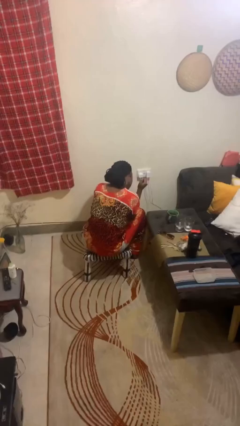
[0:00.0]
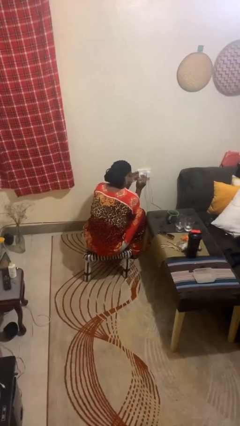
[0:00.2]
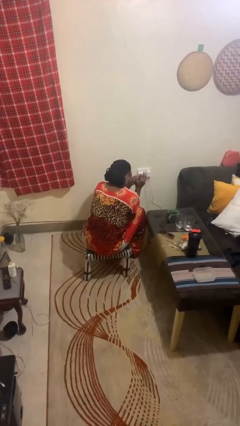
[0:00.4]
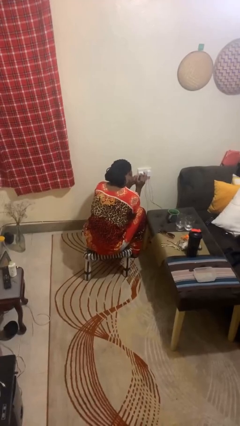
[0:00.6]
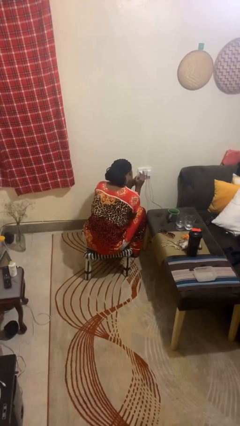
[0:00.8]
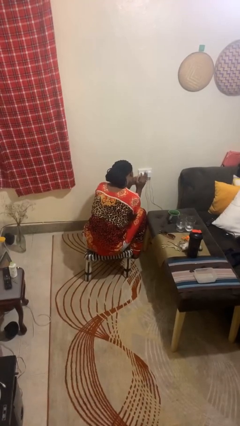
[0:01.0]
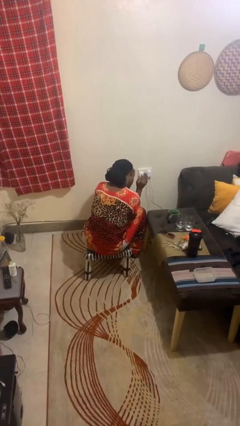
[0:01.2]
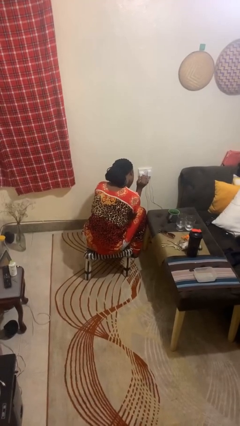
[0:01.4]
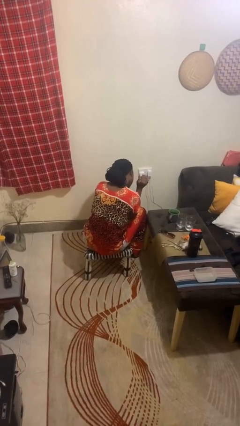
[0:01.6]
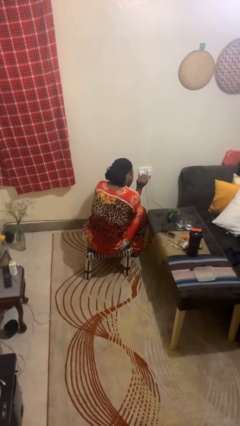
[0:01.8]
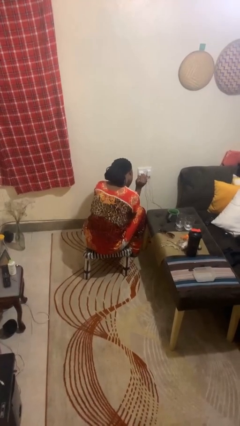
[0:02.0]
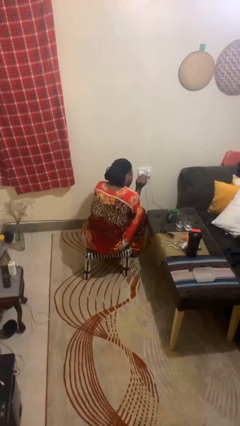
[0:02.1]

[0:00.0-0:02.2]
person puts on ring

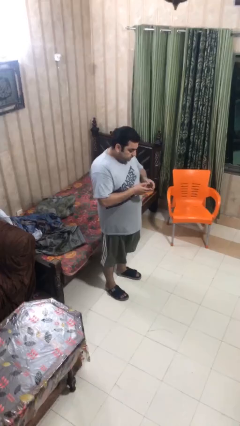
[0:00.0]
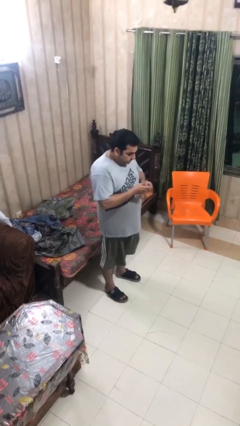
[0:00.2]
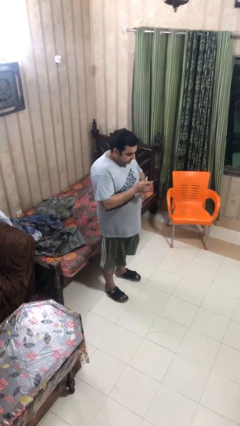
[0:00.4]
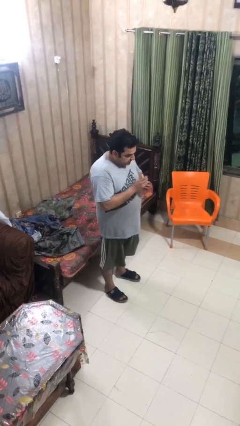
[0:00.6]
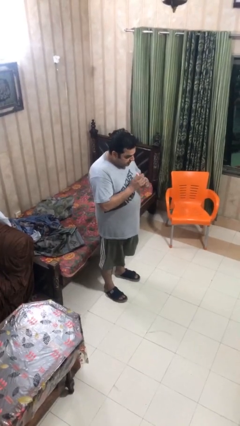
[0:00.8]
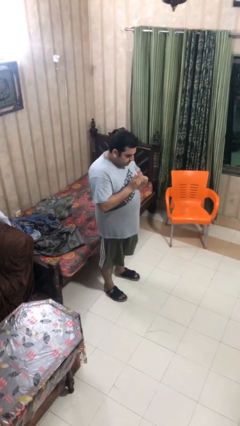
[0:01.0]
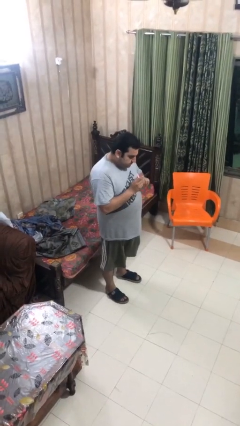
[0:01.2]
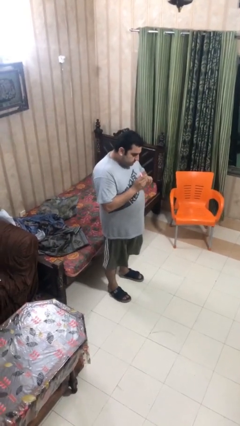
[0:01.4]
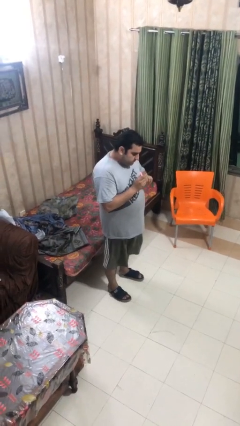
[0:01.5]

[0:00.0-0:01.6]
person clips fingernails

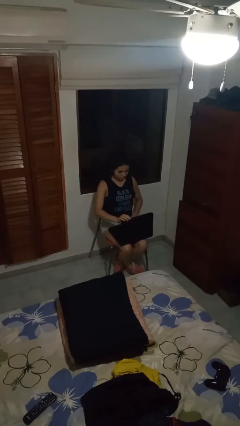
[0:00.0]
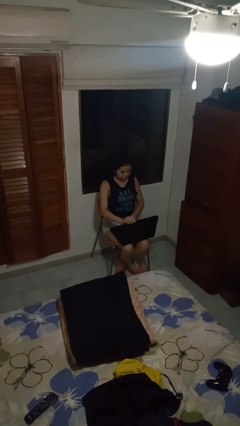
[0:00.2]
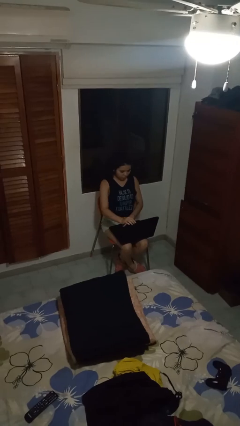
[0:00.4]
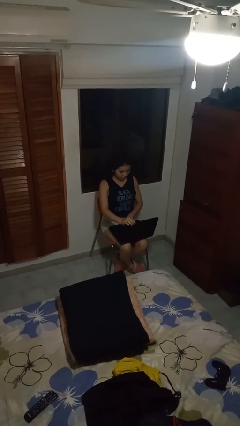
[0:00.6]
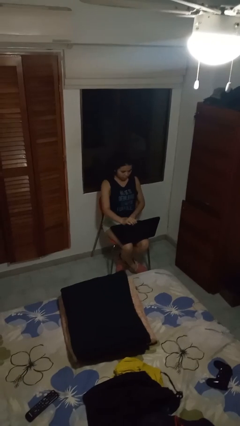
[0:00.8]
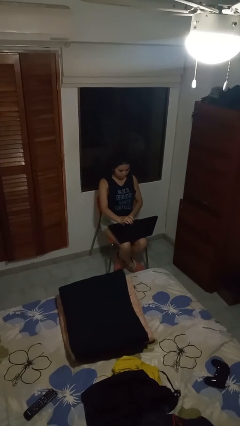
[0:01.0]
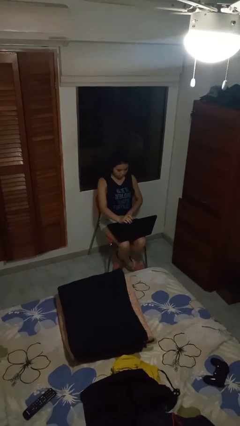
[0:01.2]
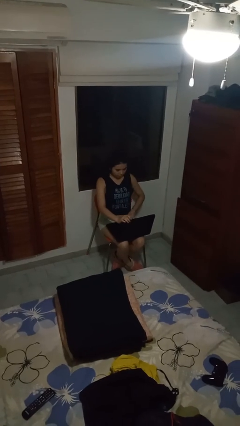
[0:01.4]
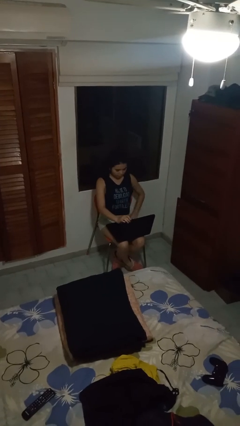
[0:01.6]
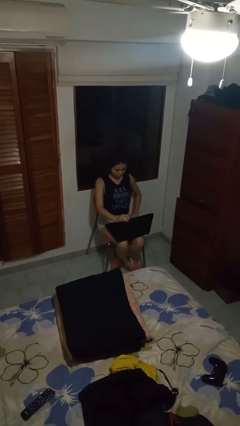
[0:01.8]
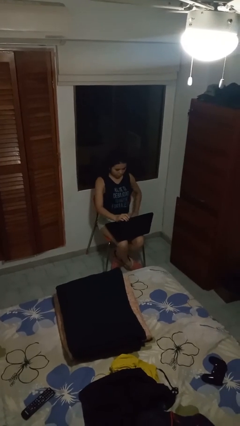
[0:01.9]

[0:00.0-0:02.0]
person interacts with laptop

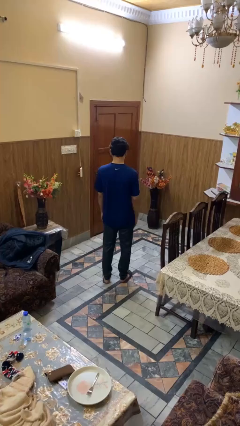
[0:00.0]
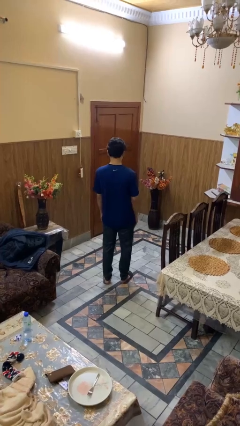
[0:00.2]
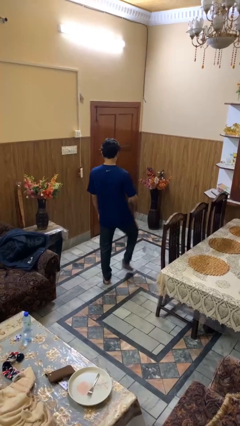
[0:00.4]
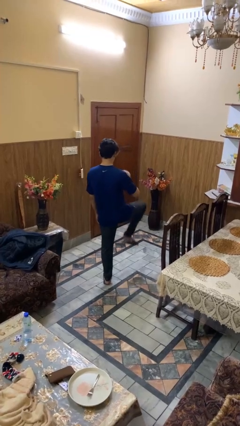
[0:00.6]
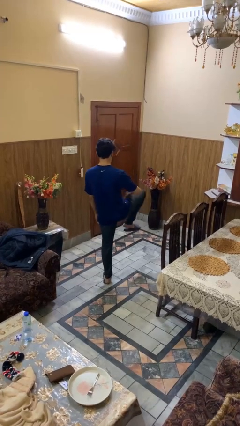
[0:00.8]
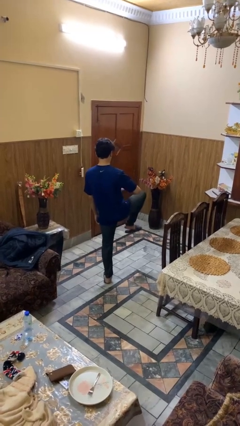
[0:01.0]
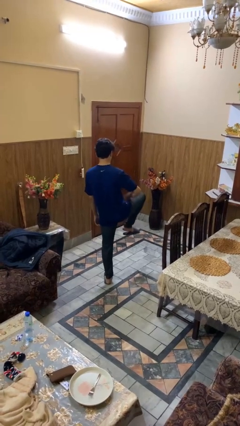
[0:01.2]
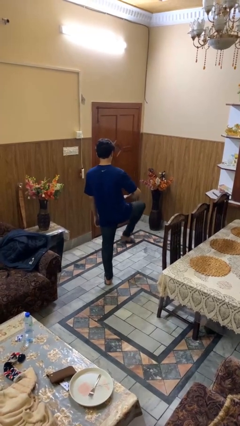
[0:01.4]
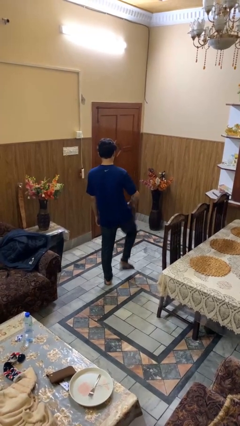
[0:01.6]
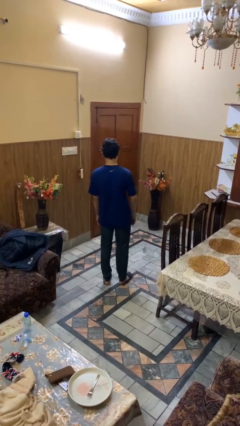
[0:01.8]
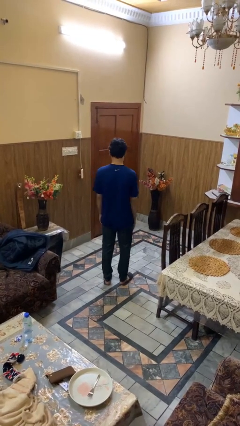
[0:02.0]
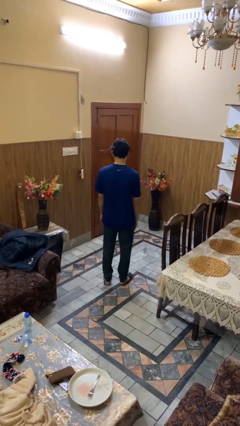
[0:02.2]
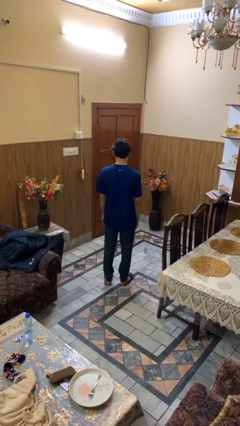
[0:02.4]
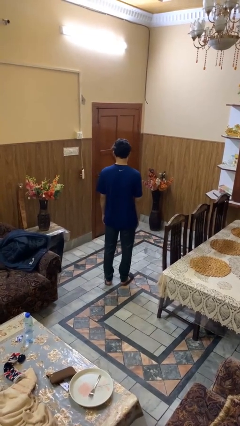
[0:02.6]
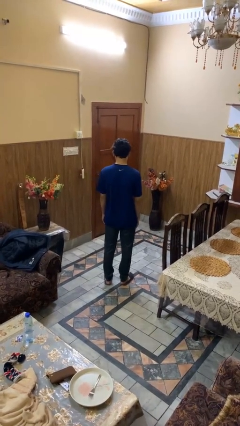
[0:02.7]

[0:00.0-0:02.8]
person slaps hands on thighs

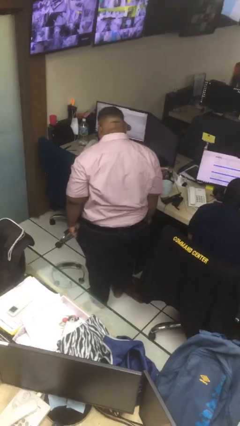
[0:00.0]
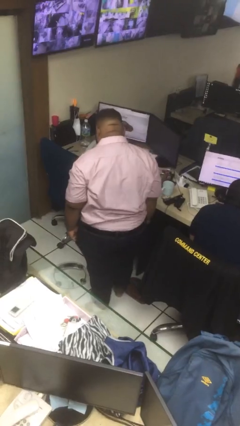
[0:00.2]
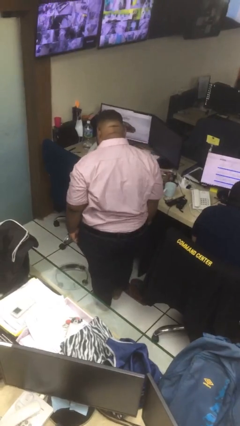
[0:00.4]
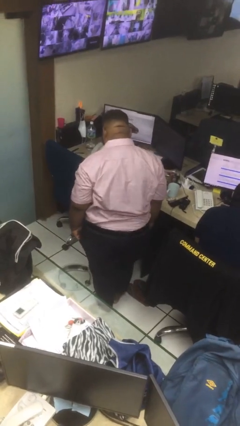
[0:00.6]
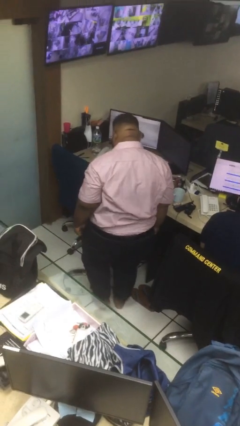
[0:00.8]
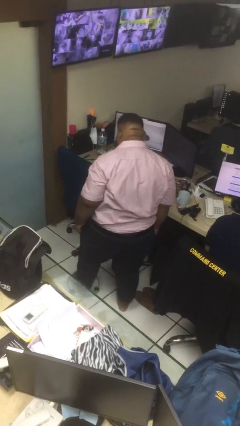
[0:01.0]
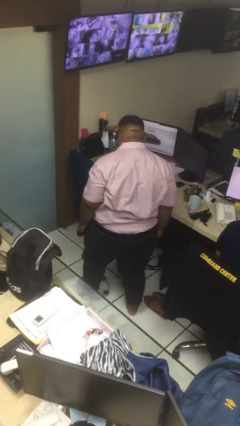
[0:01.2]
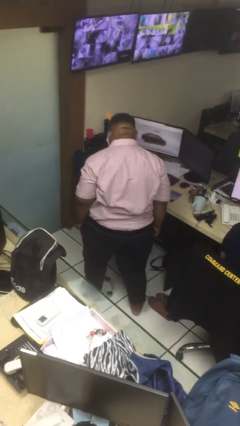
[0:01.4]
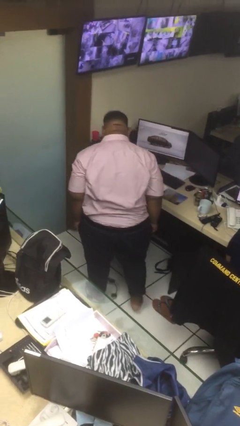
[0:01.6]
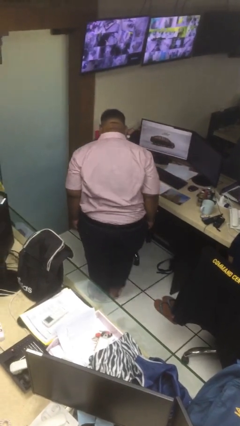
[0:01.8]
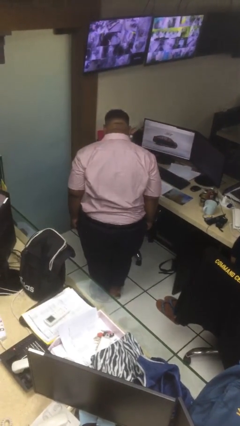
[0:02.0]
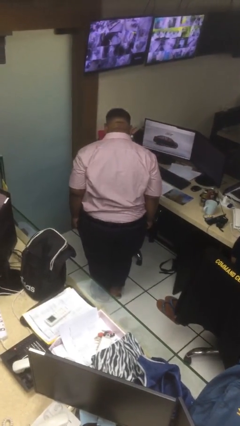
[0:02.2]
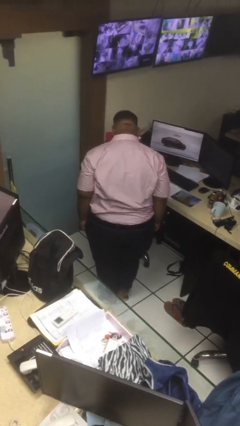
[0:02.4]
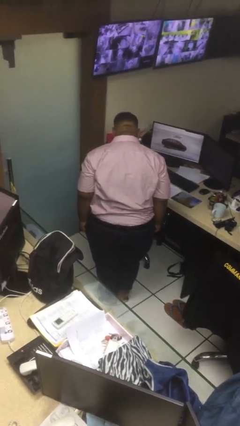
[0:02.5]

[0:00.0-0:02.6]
person uses bodyweight scale

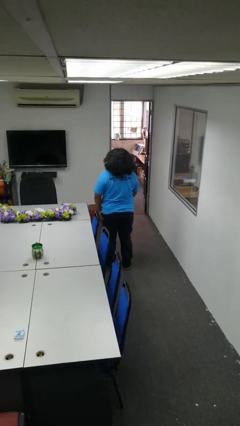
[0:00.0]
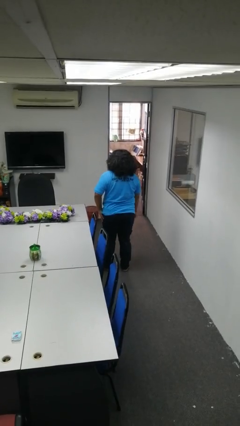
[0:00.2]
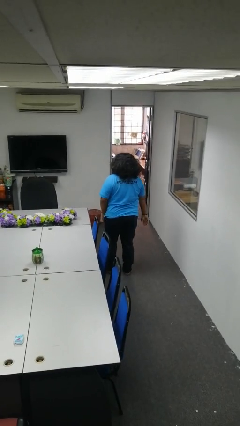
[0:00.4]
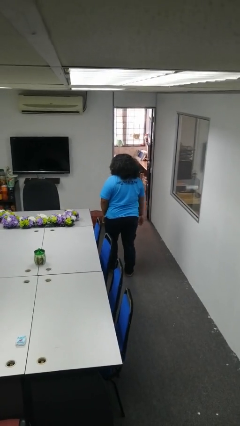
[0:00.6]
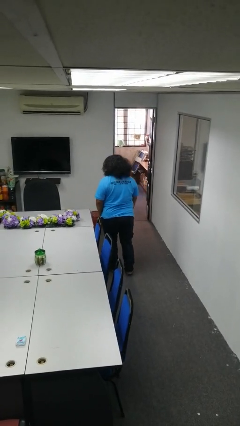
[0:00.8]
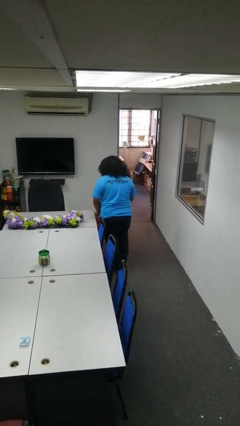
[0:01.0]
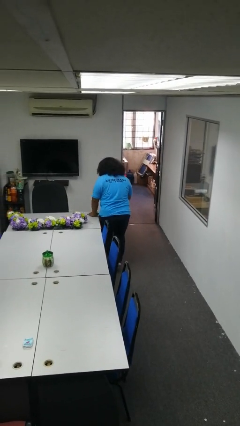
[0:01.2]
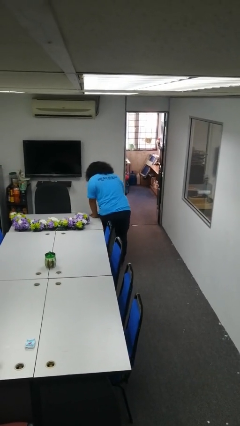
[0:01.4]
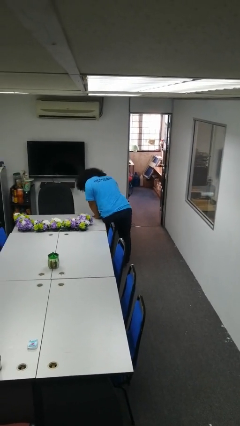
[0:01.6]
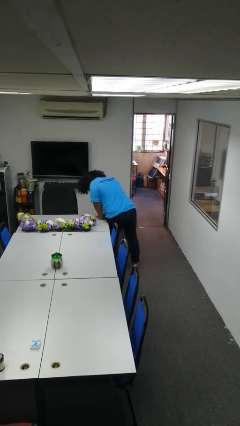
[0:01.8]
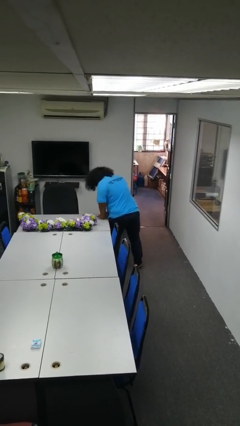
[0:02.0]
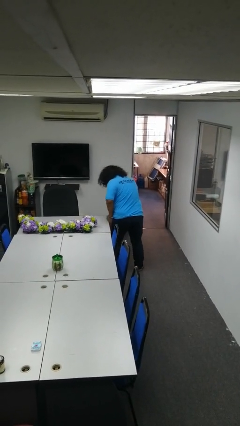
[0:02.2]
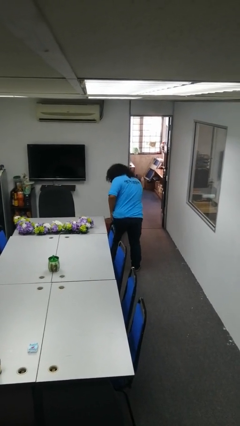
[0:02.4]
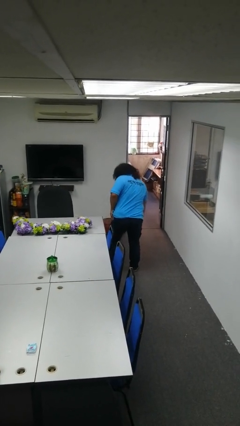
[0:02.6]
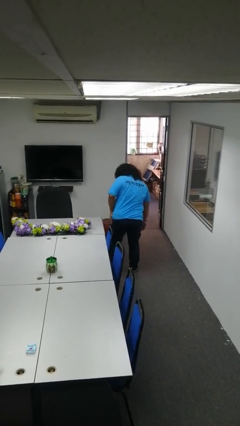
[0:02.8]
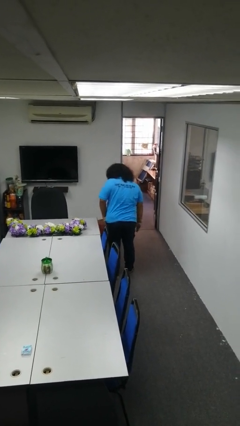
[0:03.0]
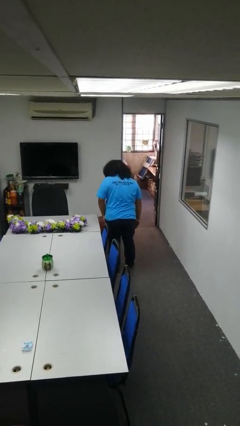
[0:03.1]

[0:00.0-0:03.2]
person bumps into table

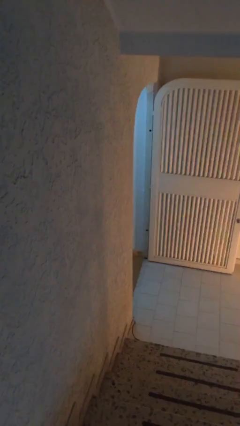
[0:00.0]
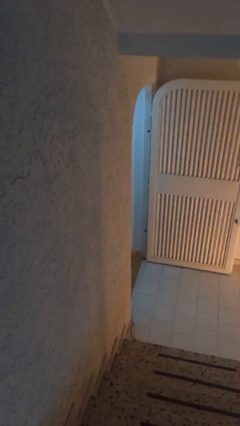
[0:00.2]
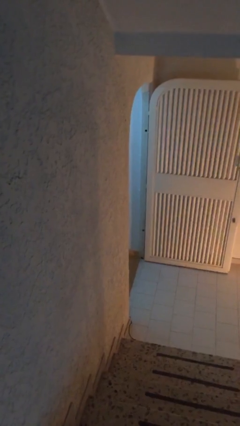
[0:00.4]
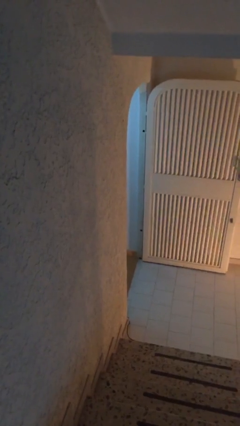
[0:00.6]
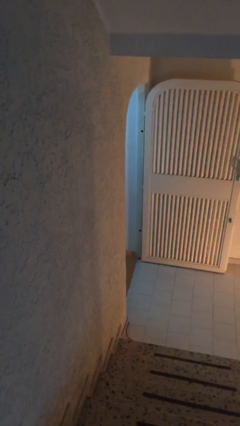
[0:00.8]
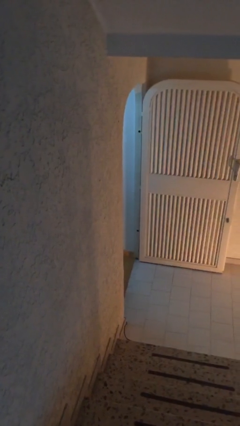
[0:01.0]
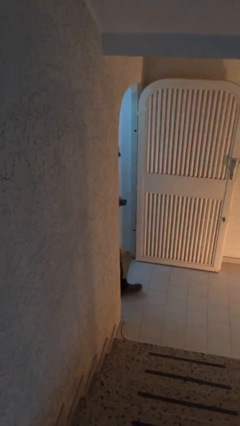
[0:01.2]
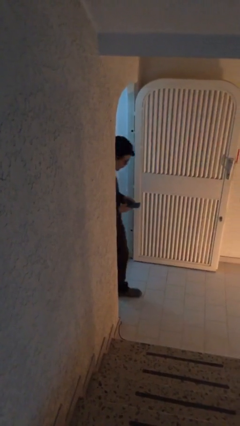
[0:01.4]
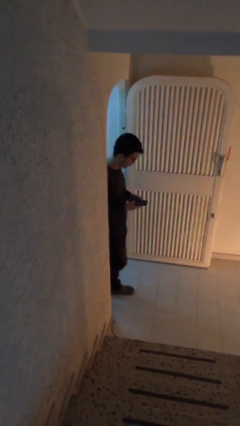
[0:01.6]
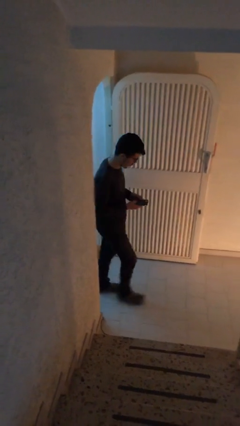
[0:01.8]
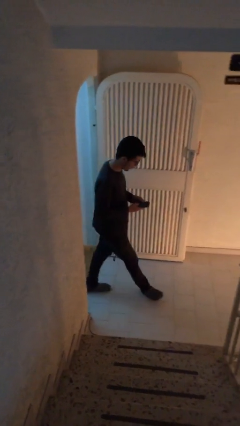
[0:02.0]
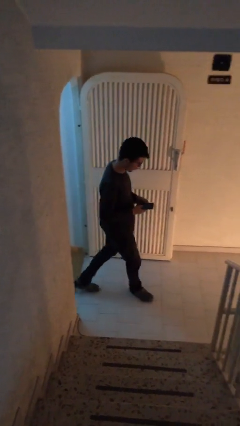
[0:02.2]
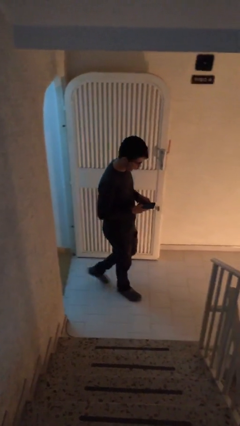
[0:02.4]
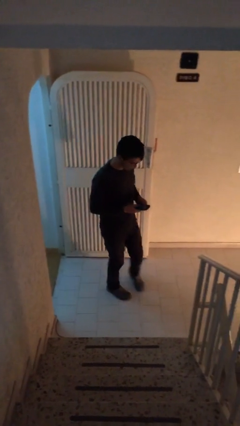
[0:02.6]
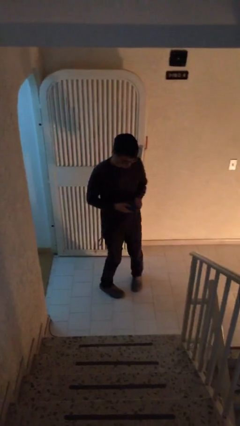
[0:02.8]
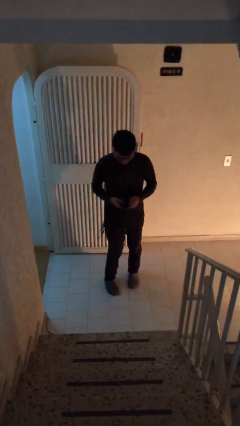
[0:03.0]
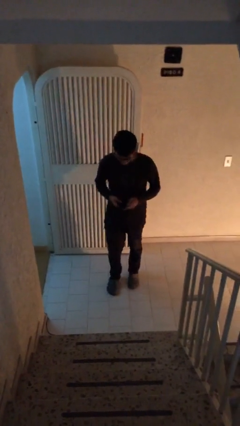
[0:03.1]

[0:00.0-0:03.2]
person enters scene through structure
